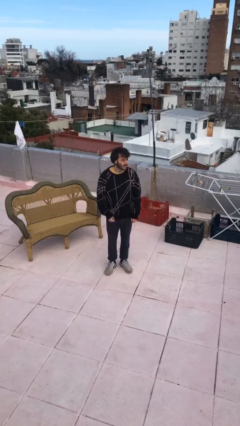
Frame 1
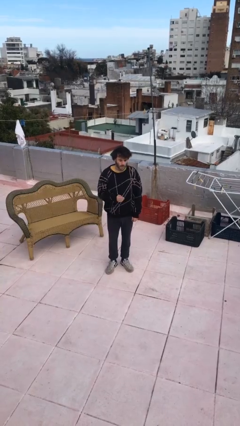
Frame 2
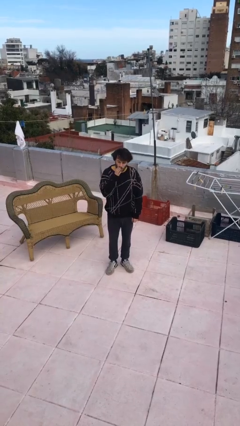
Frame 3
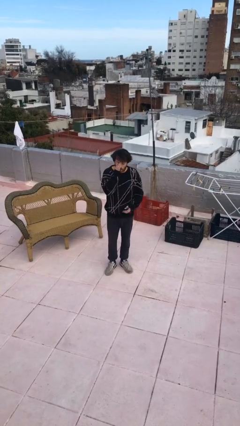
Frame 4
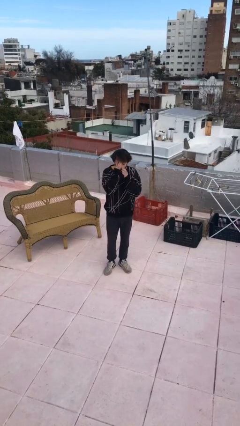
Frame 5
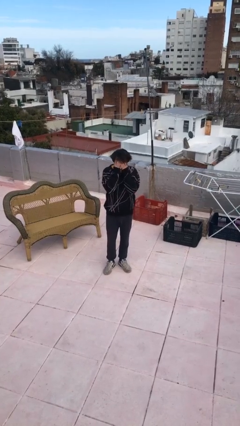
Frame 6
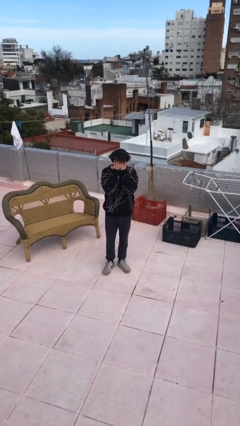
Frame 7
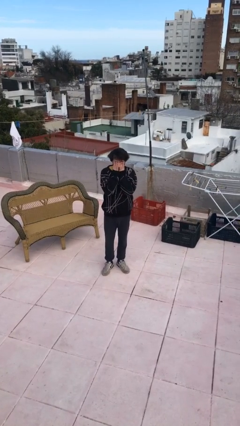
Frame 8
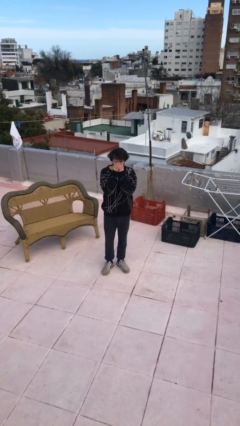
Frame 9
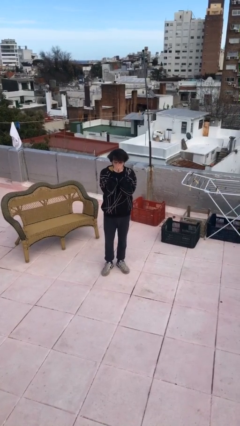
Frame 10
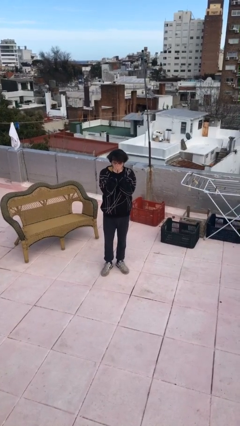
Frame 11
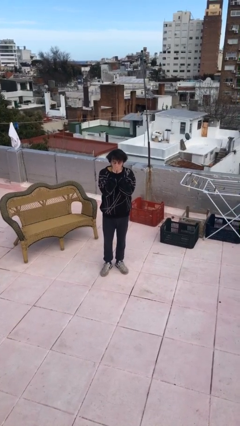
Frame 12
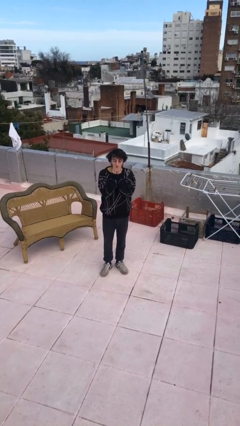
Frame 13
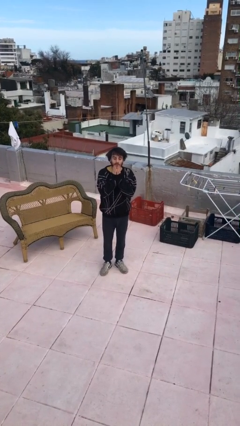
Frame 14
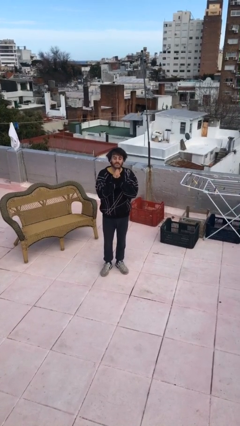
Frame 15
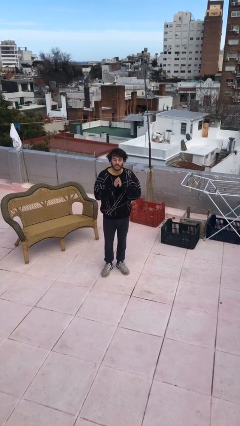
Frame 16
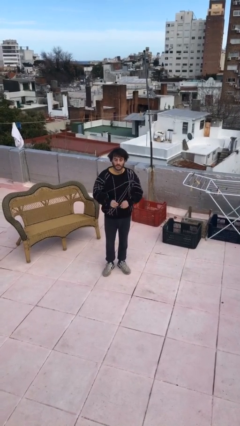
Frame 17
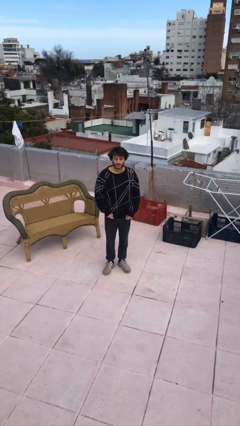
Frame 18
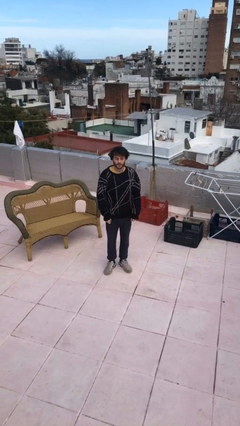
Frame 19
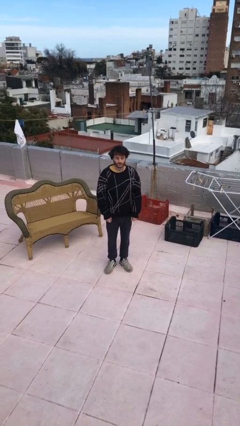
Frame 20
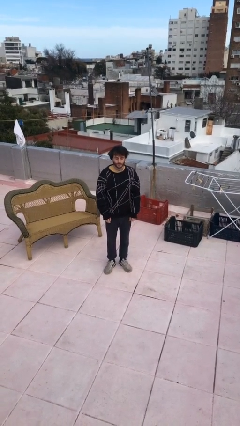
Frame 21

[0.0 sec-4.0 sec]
person scratches face

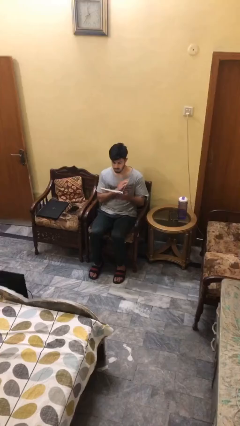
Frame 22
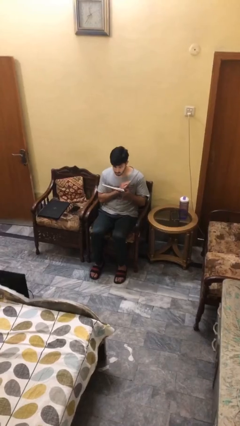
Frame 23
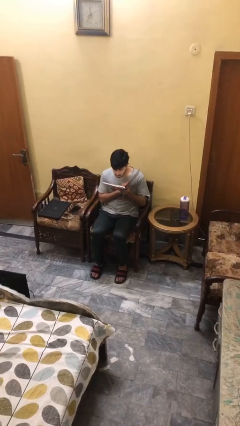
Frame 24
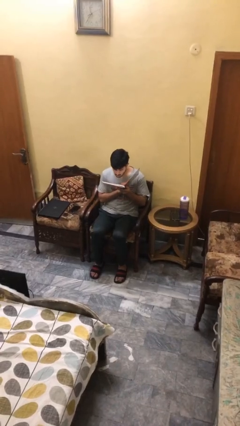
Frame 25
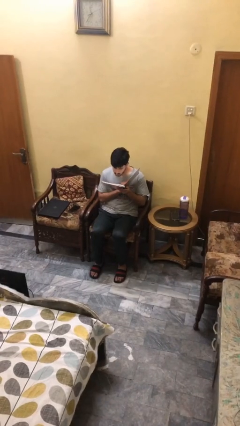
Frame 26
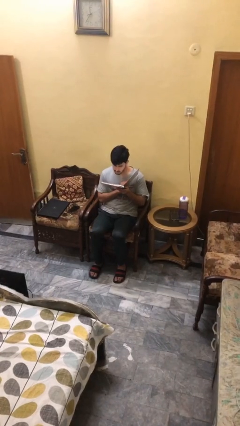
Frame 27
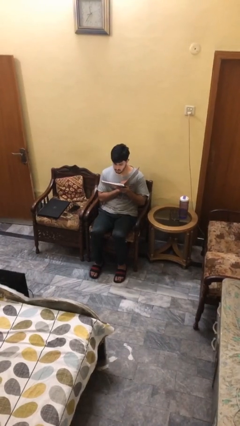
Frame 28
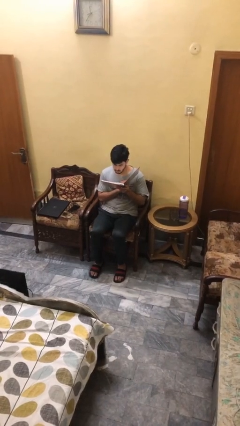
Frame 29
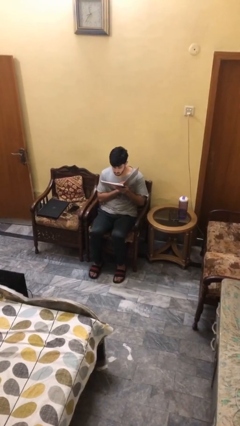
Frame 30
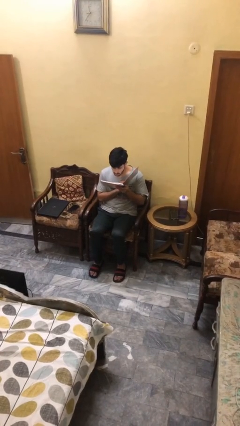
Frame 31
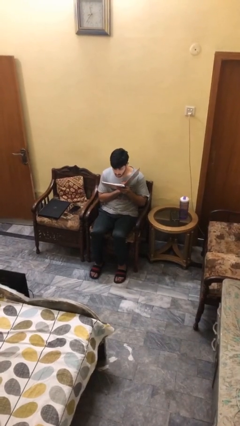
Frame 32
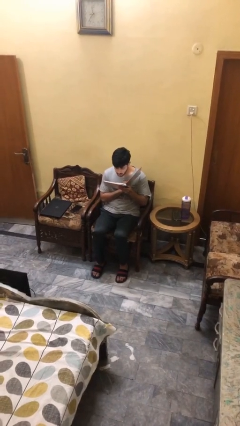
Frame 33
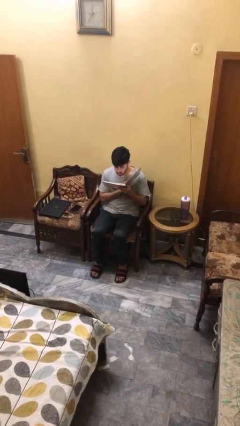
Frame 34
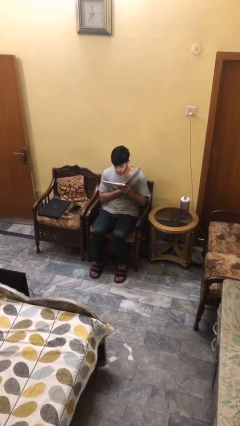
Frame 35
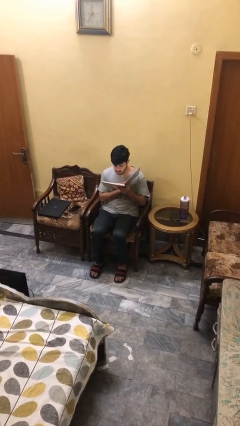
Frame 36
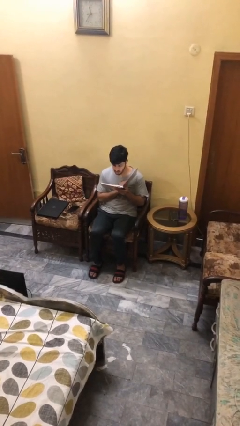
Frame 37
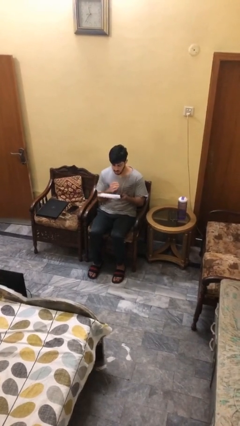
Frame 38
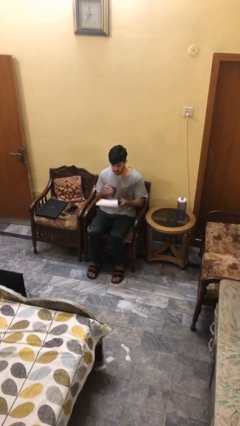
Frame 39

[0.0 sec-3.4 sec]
person reads document

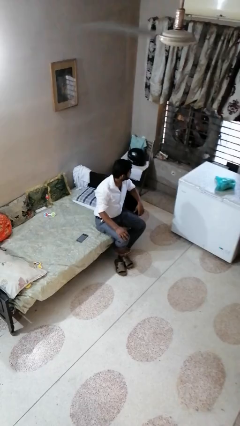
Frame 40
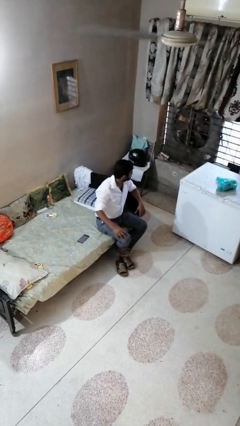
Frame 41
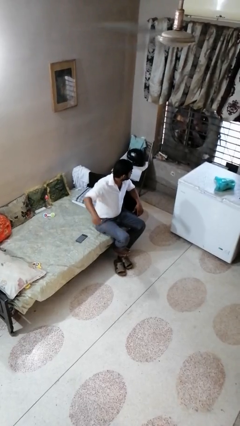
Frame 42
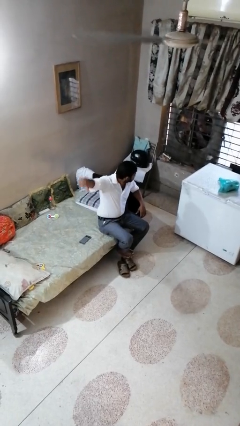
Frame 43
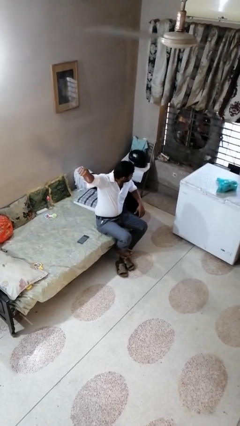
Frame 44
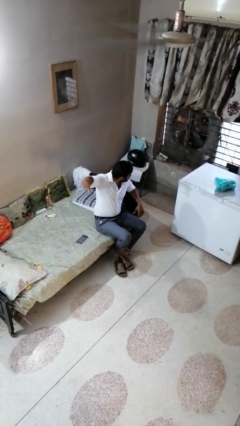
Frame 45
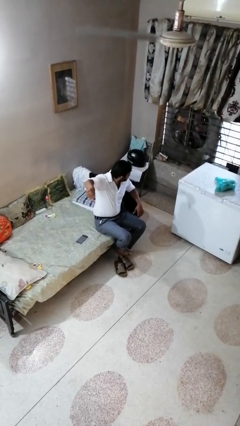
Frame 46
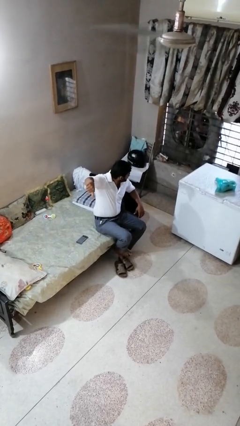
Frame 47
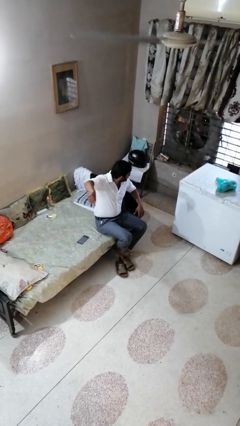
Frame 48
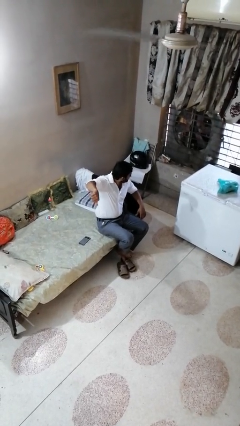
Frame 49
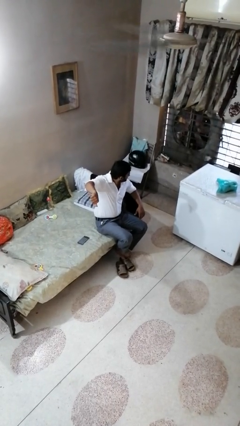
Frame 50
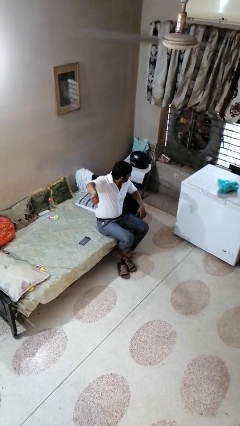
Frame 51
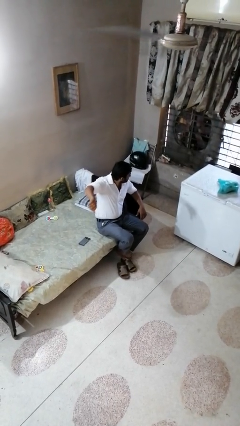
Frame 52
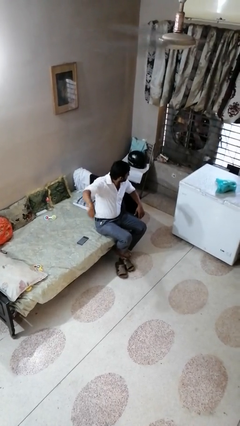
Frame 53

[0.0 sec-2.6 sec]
person gestures thumbs down

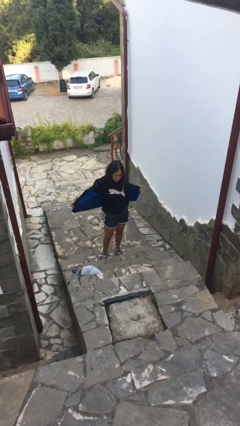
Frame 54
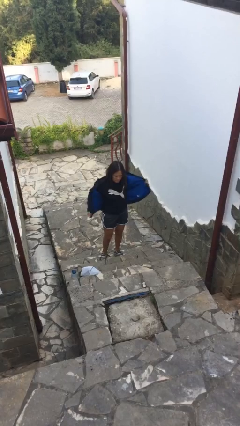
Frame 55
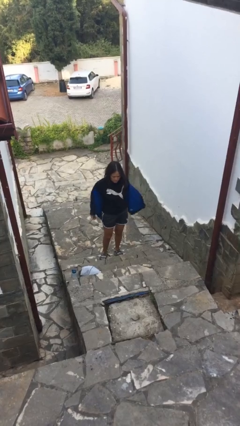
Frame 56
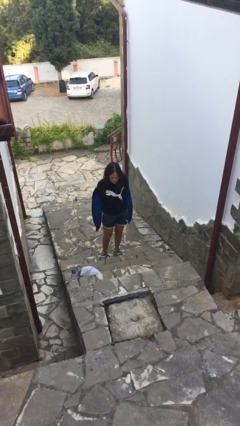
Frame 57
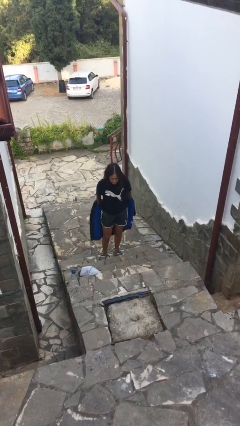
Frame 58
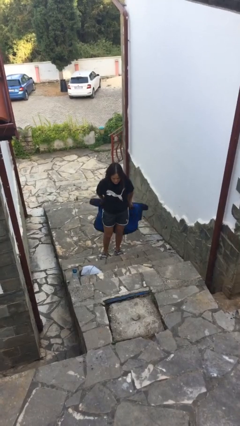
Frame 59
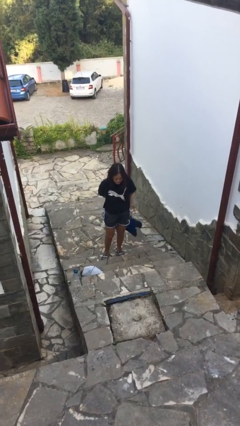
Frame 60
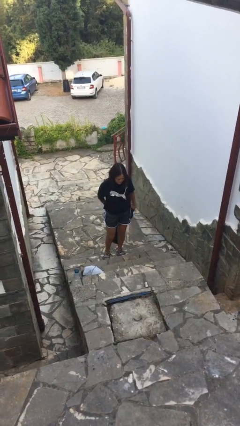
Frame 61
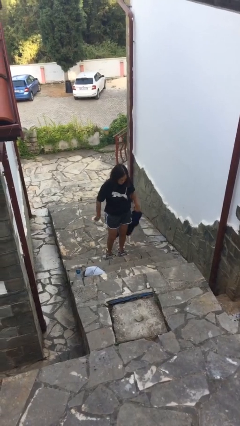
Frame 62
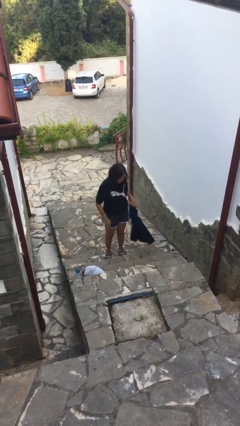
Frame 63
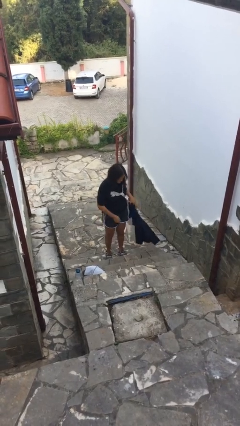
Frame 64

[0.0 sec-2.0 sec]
person takes off jacket

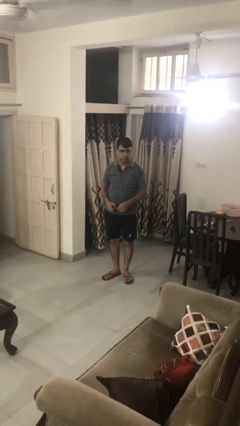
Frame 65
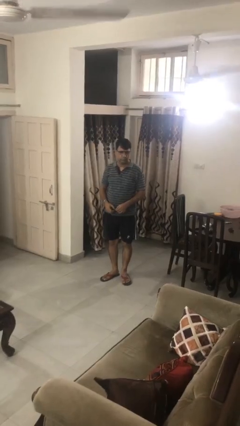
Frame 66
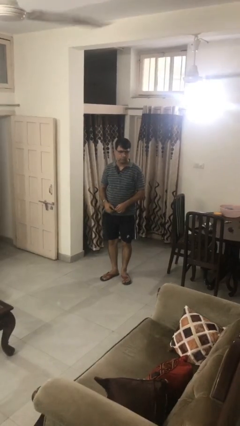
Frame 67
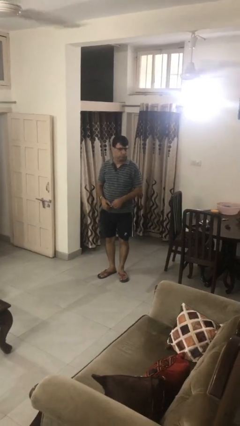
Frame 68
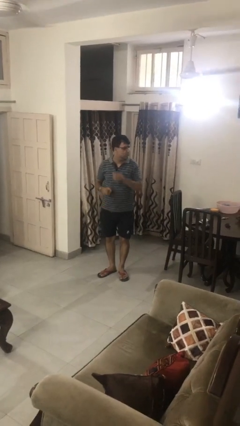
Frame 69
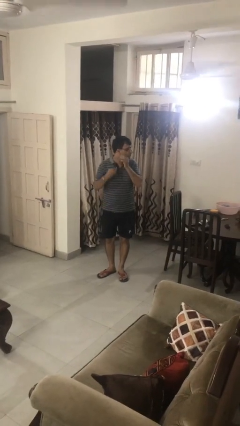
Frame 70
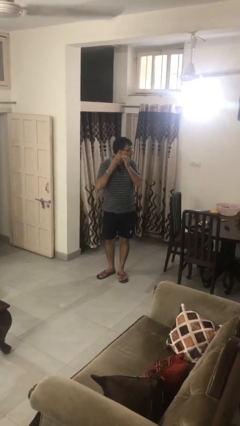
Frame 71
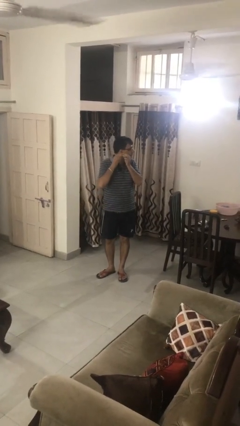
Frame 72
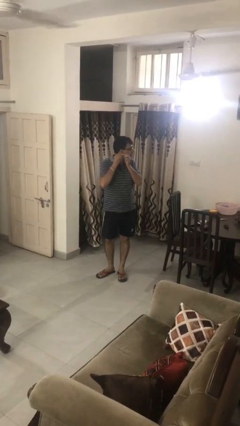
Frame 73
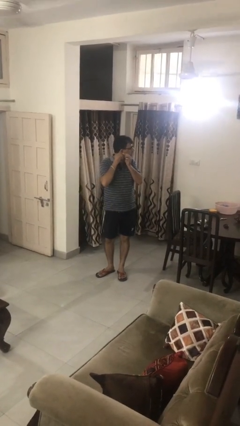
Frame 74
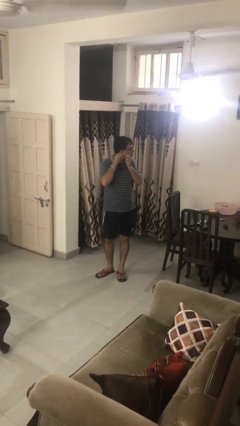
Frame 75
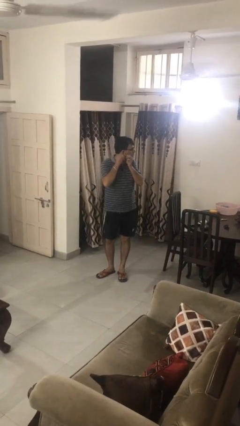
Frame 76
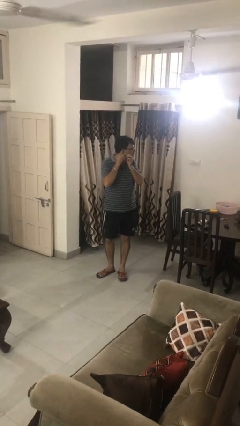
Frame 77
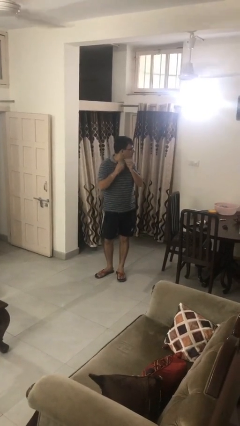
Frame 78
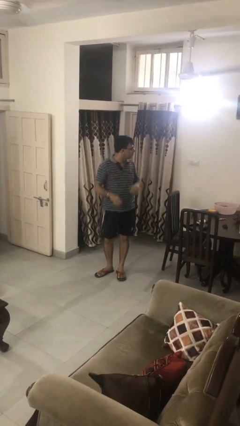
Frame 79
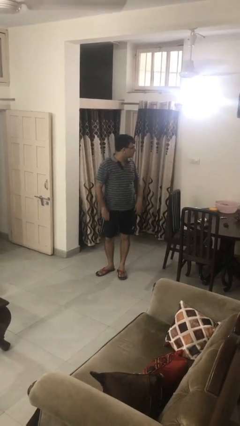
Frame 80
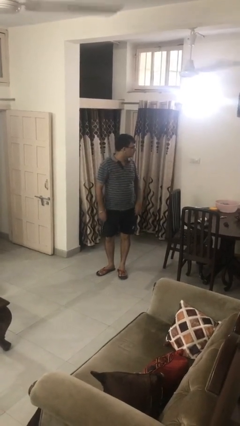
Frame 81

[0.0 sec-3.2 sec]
person puts on earrings

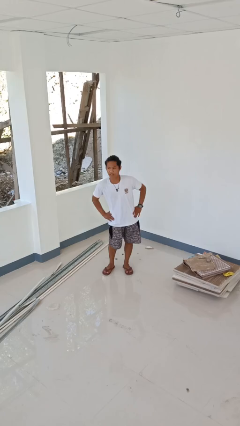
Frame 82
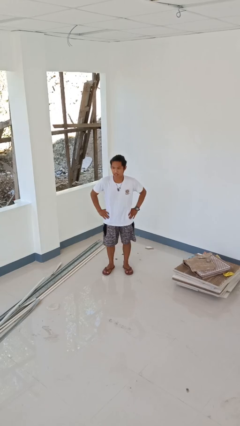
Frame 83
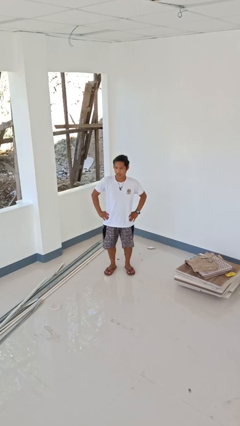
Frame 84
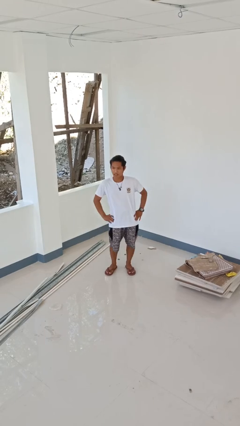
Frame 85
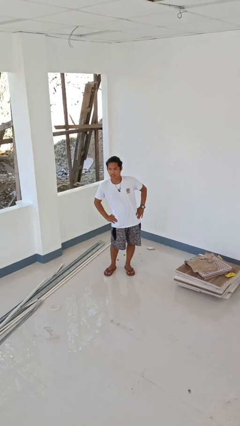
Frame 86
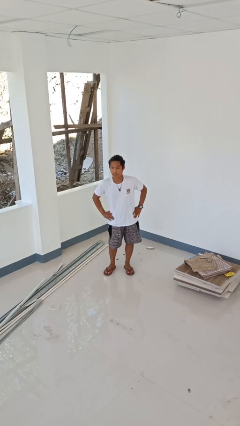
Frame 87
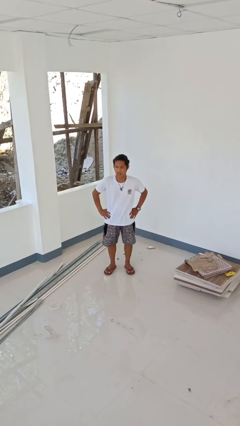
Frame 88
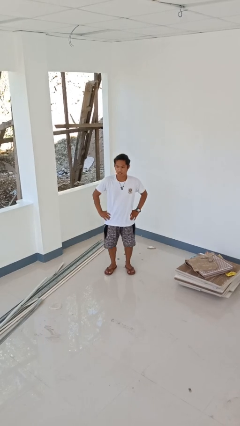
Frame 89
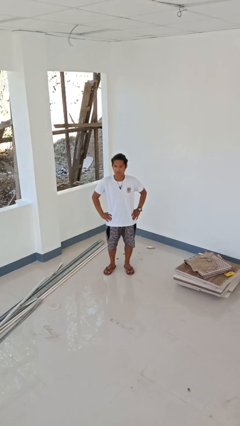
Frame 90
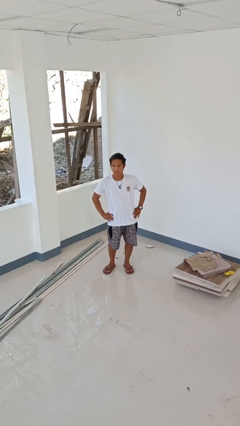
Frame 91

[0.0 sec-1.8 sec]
person wiggles hips

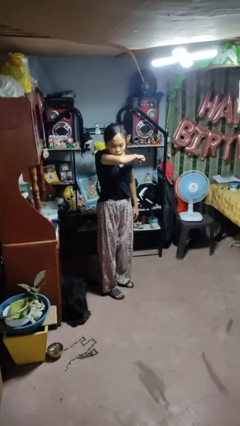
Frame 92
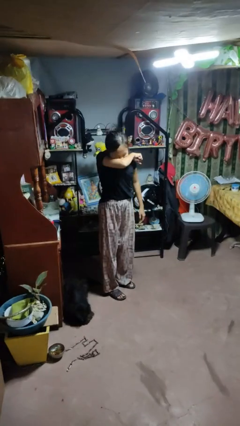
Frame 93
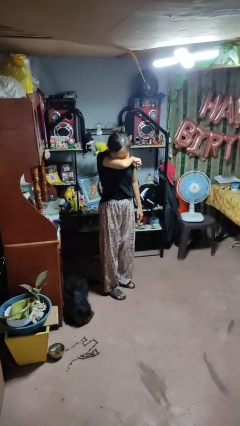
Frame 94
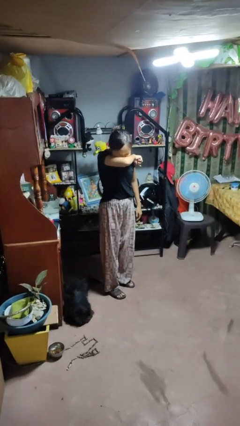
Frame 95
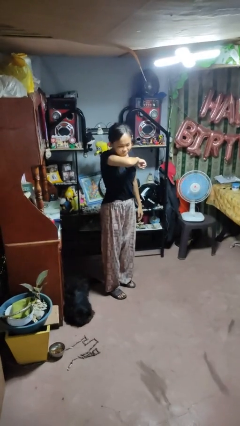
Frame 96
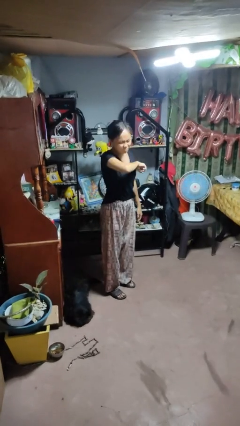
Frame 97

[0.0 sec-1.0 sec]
person sneezes into arm
